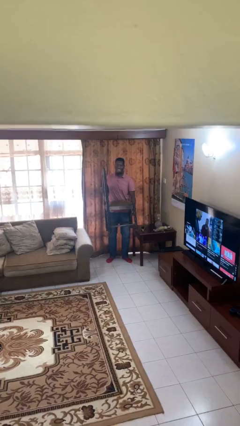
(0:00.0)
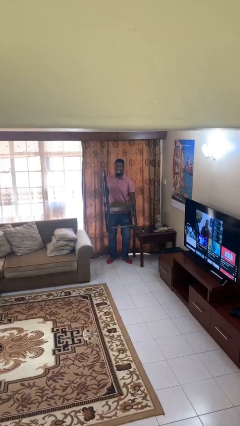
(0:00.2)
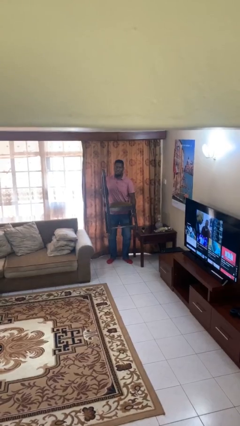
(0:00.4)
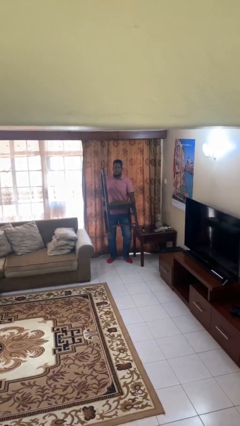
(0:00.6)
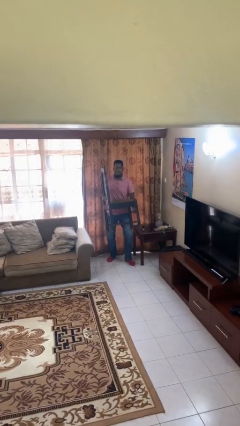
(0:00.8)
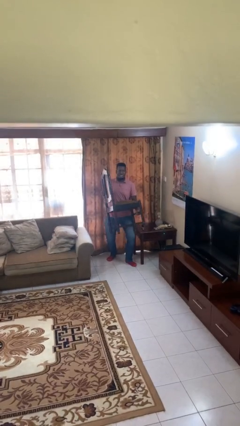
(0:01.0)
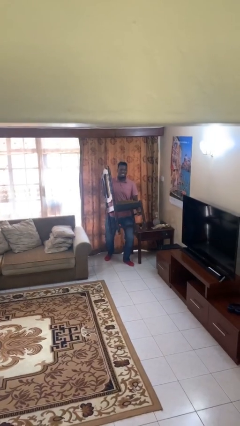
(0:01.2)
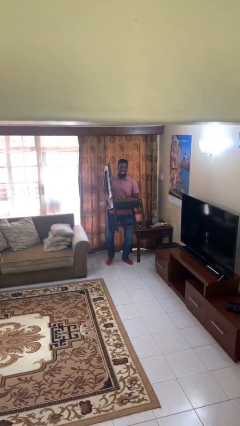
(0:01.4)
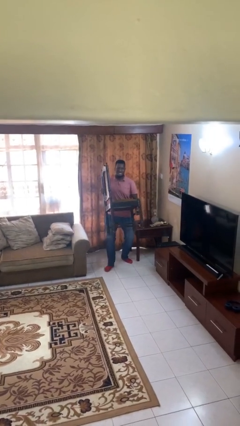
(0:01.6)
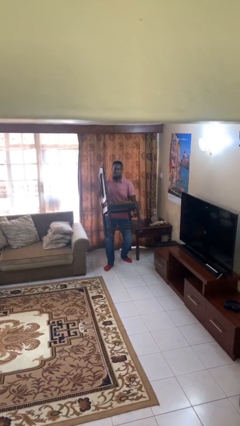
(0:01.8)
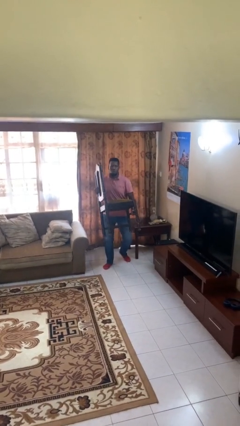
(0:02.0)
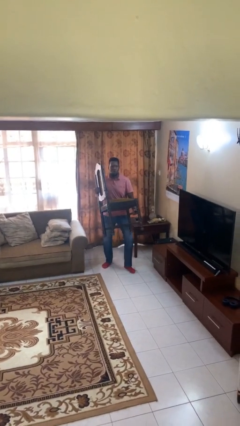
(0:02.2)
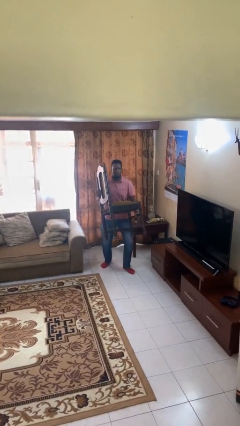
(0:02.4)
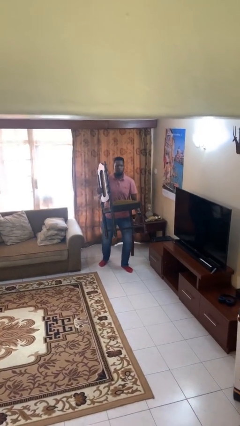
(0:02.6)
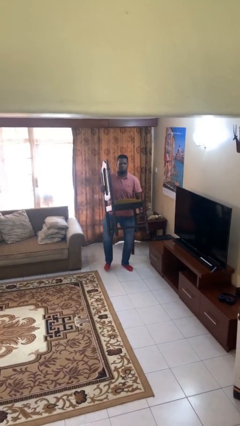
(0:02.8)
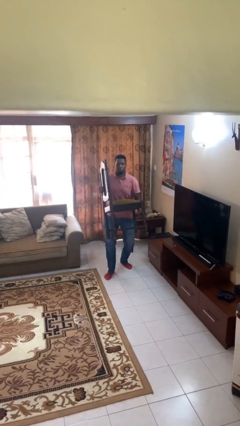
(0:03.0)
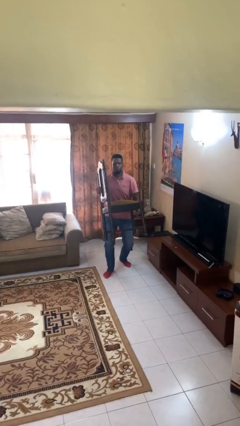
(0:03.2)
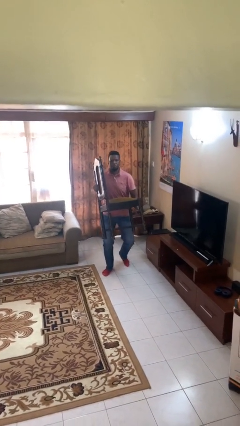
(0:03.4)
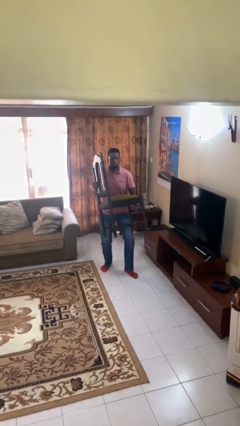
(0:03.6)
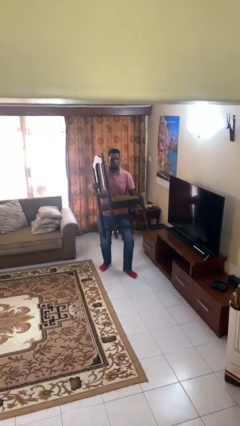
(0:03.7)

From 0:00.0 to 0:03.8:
person carries heavy object

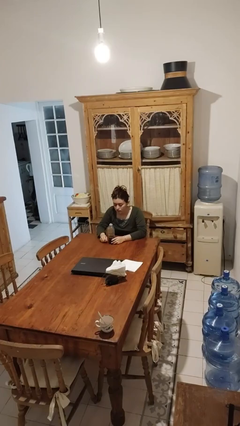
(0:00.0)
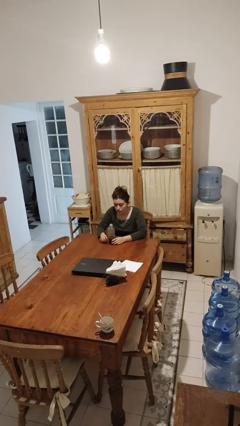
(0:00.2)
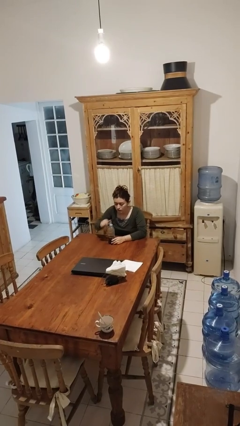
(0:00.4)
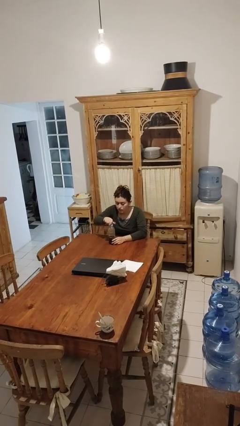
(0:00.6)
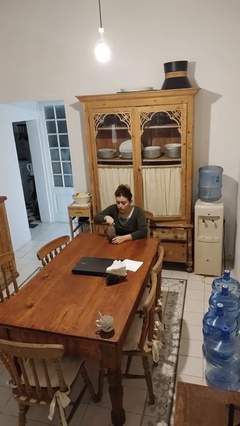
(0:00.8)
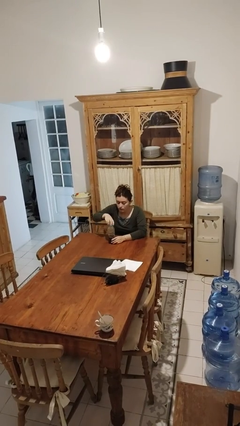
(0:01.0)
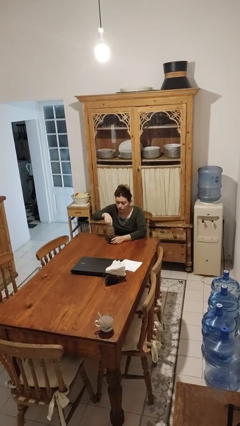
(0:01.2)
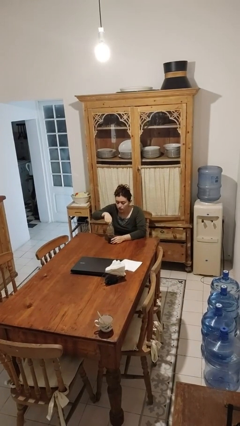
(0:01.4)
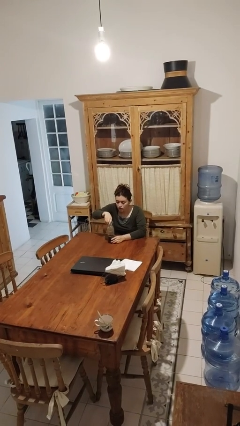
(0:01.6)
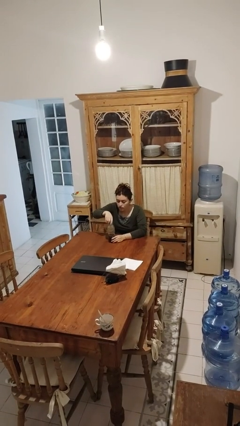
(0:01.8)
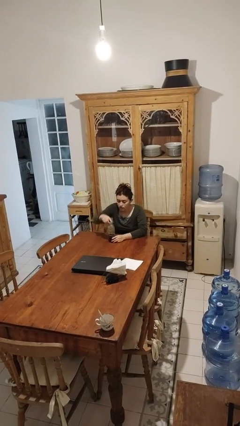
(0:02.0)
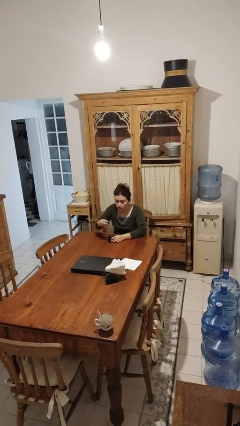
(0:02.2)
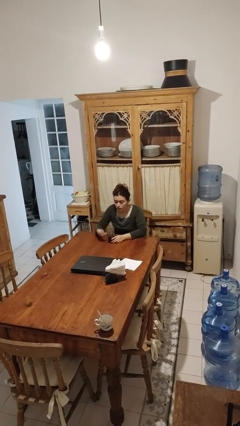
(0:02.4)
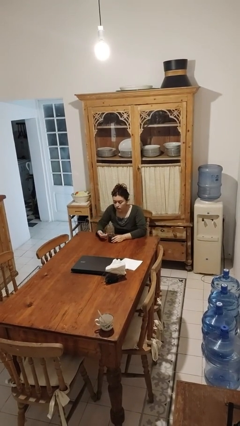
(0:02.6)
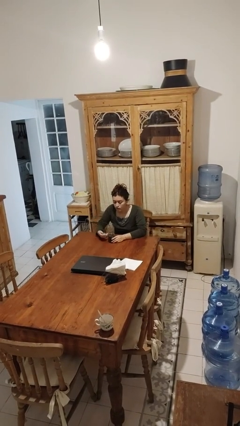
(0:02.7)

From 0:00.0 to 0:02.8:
person unscrews lid from bottle

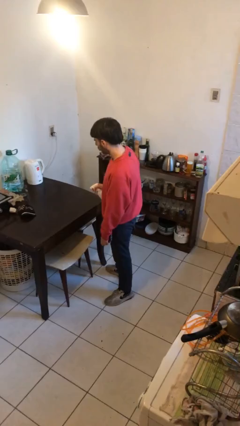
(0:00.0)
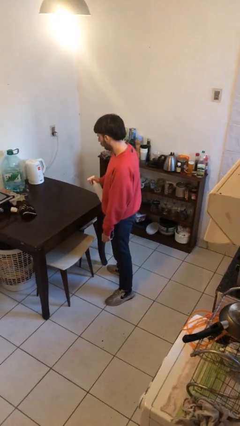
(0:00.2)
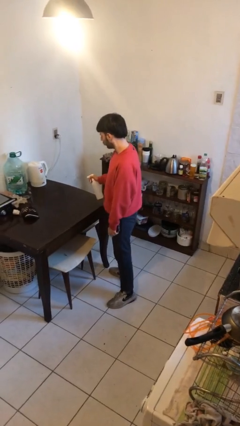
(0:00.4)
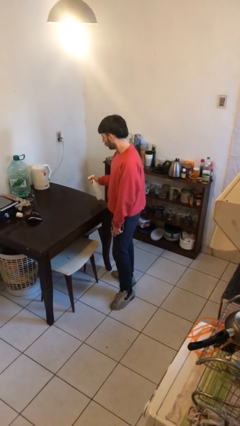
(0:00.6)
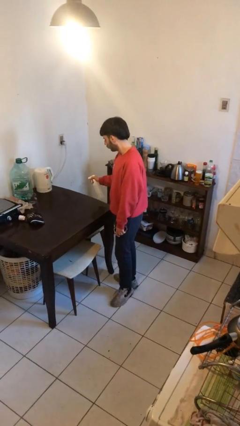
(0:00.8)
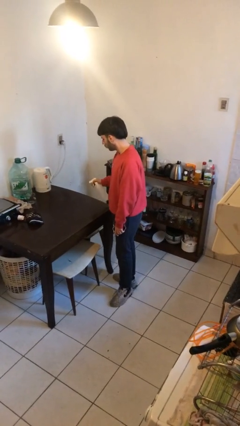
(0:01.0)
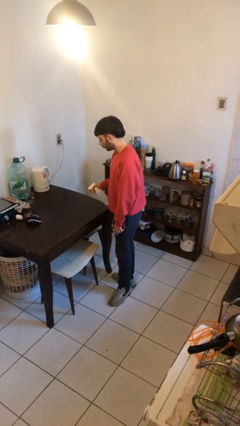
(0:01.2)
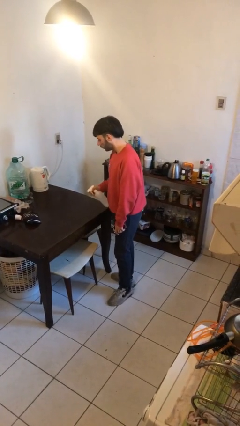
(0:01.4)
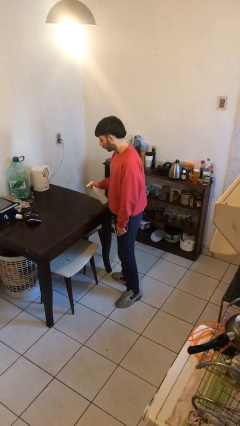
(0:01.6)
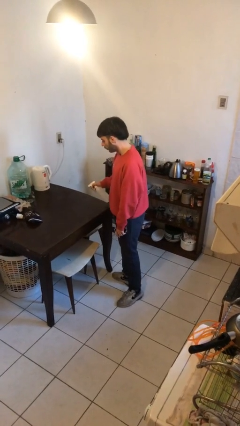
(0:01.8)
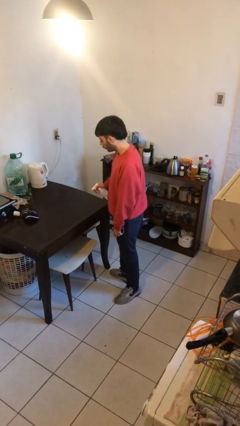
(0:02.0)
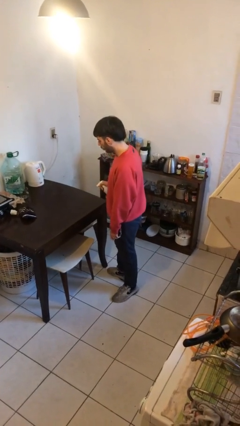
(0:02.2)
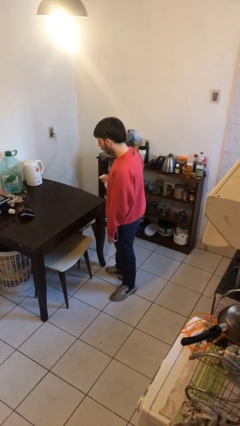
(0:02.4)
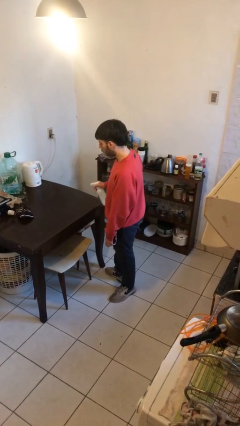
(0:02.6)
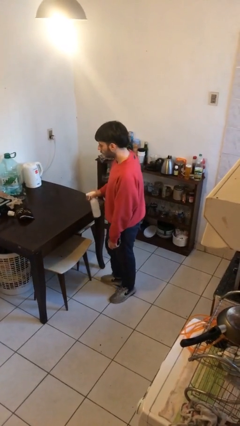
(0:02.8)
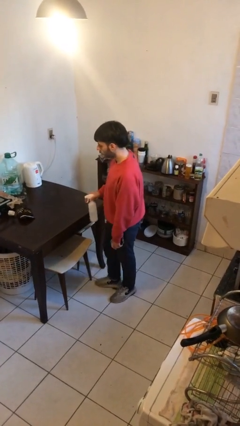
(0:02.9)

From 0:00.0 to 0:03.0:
person sprays from bottle

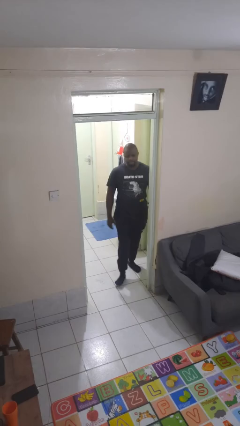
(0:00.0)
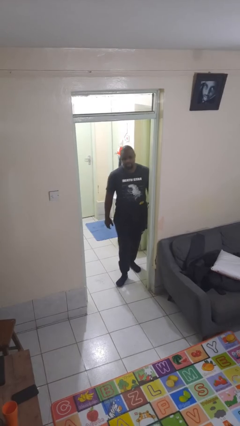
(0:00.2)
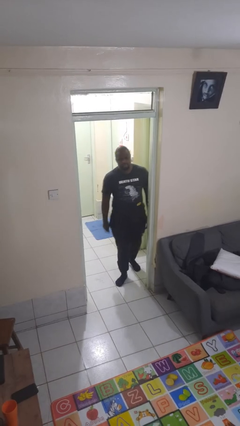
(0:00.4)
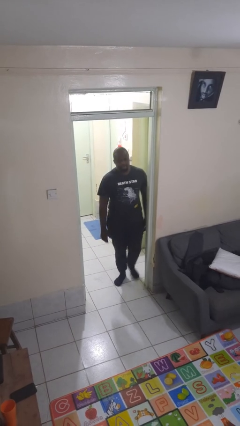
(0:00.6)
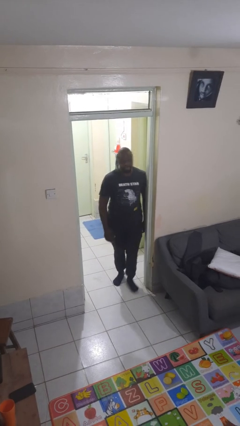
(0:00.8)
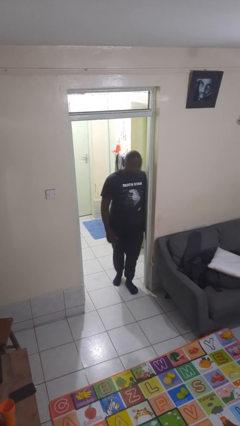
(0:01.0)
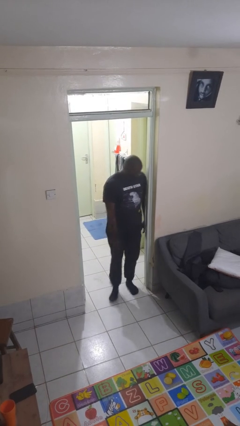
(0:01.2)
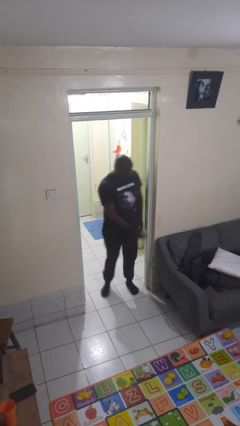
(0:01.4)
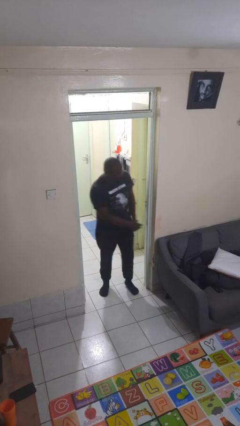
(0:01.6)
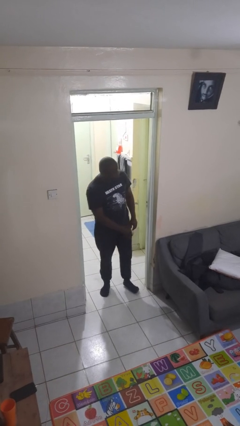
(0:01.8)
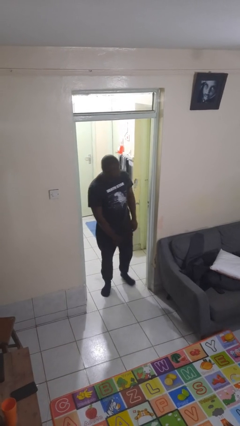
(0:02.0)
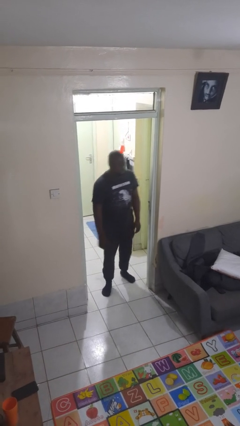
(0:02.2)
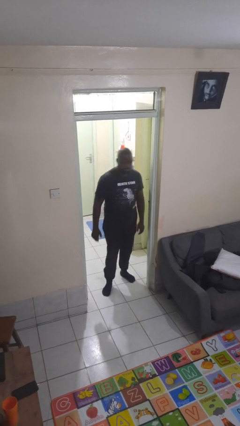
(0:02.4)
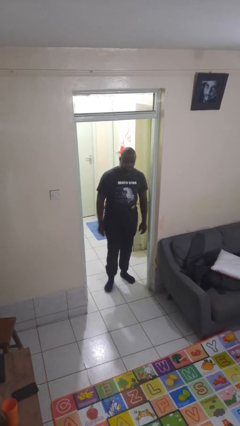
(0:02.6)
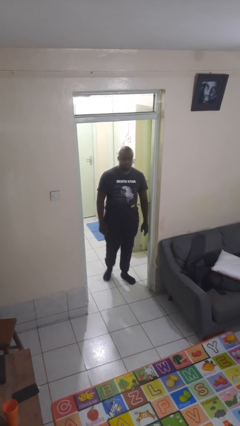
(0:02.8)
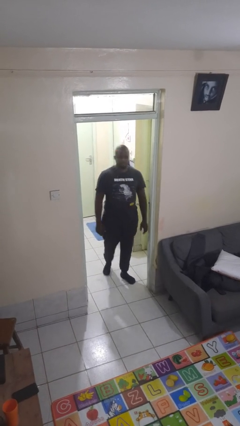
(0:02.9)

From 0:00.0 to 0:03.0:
person bumps into wall

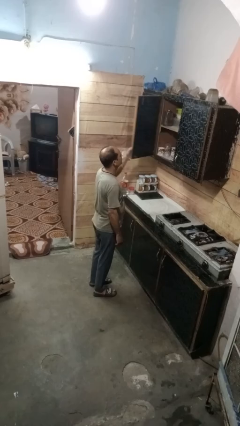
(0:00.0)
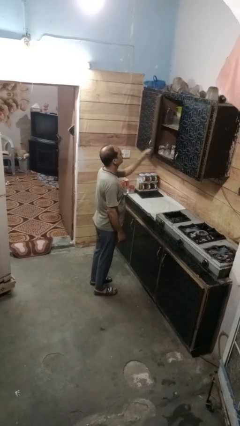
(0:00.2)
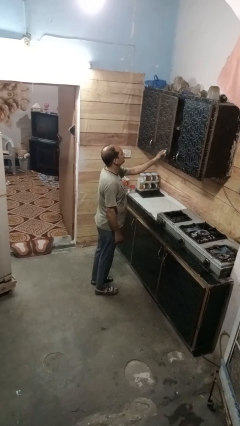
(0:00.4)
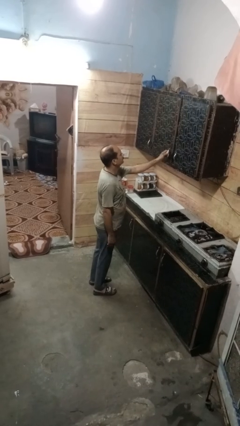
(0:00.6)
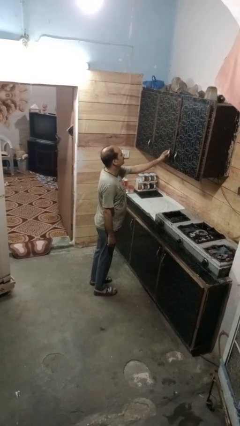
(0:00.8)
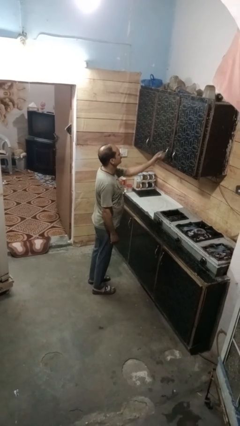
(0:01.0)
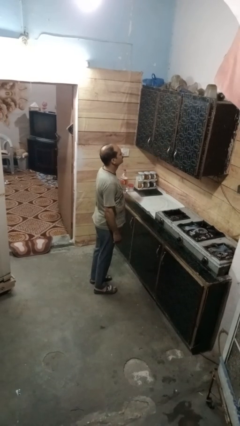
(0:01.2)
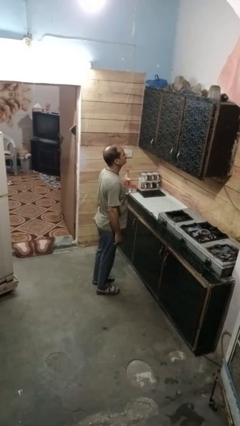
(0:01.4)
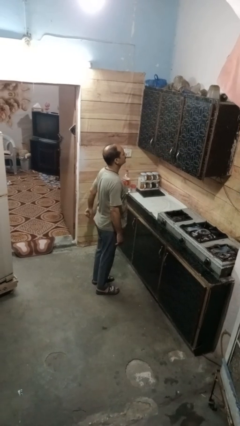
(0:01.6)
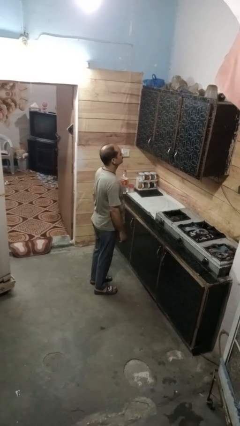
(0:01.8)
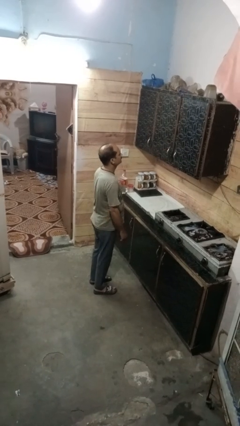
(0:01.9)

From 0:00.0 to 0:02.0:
person closes cabinet

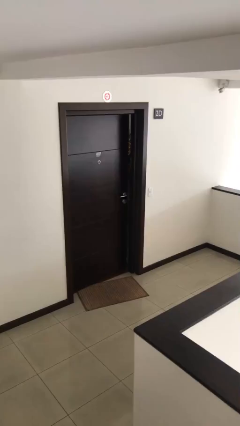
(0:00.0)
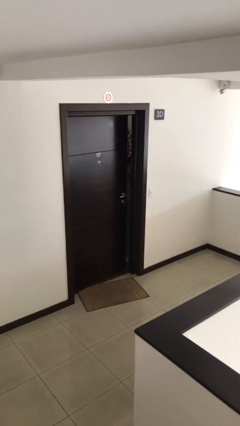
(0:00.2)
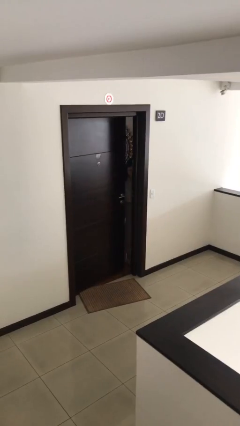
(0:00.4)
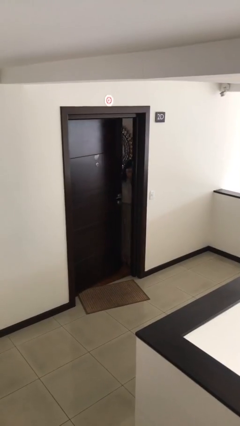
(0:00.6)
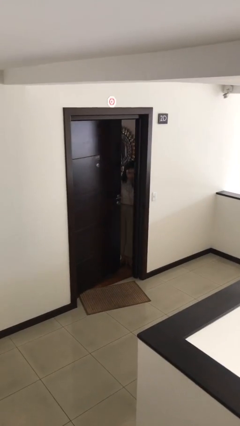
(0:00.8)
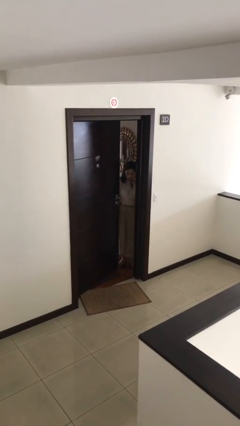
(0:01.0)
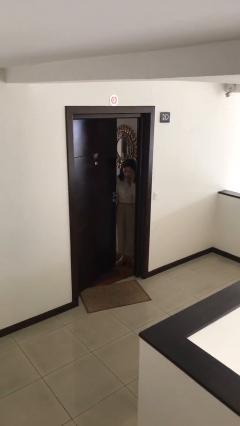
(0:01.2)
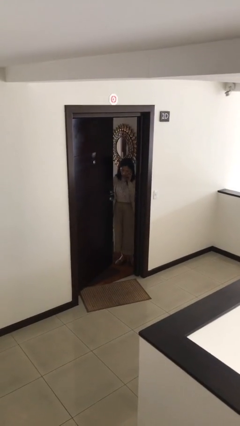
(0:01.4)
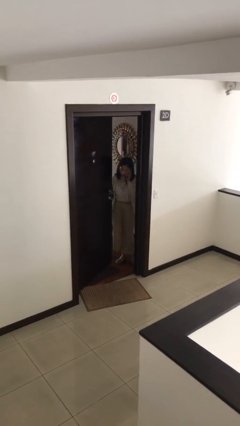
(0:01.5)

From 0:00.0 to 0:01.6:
person opens facility door

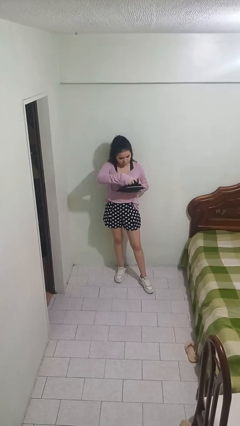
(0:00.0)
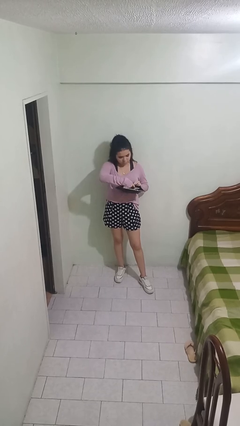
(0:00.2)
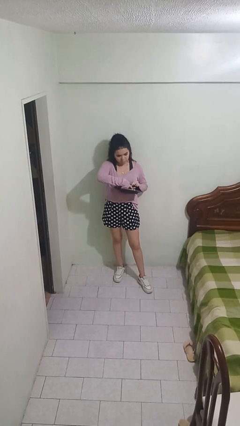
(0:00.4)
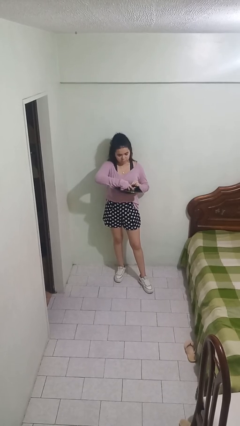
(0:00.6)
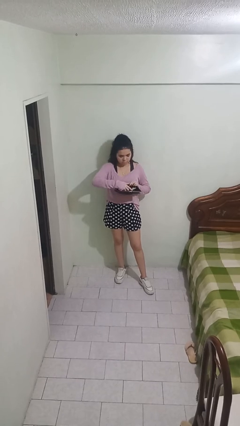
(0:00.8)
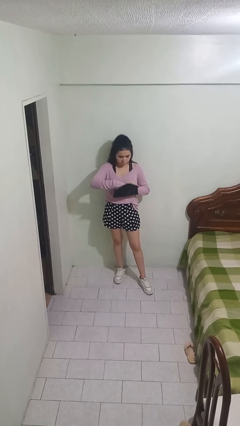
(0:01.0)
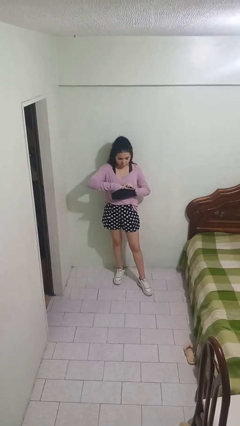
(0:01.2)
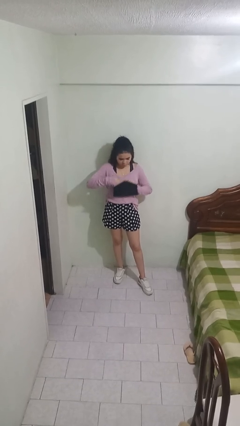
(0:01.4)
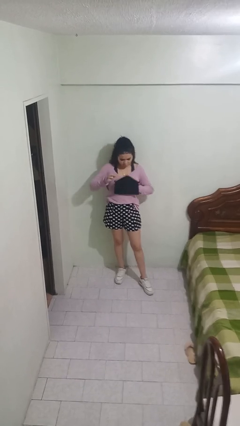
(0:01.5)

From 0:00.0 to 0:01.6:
person puts object into purse
